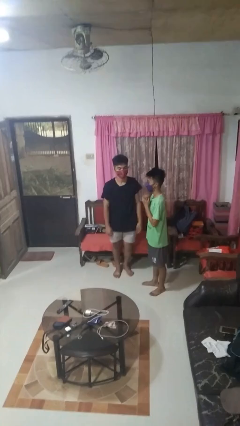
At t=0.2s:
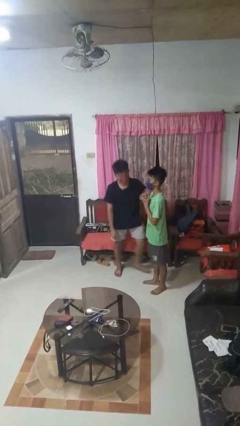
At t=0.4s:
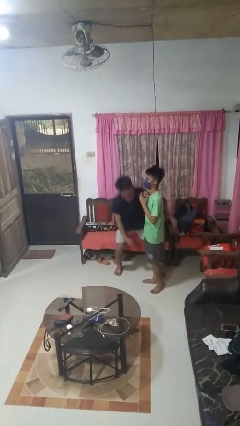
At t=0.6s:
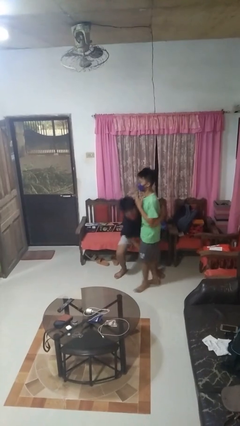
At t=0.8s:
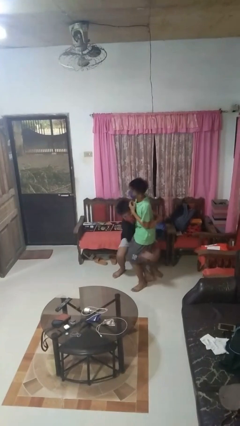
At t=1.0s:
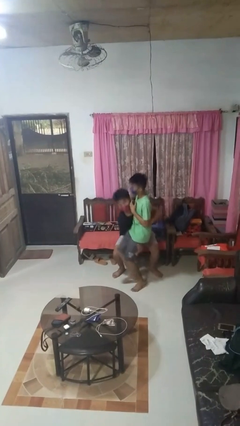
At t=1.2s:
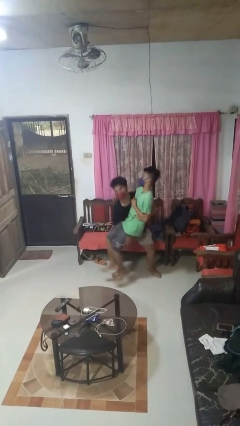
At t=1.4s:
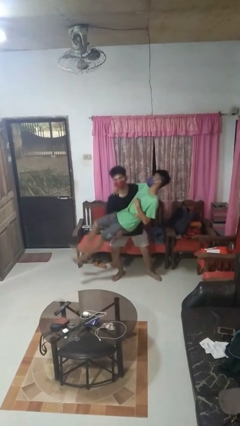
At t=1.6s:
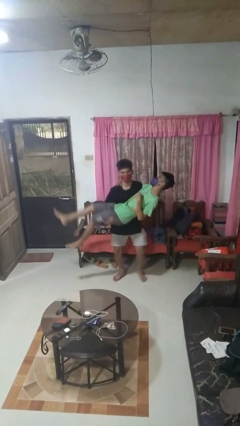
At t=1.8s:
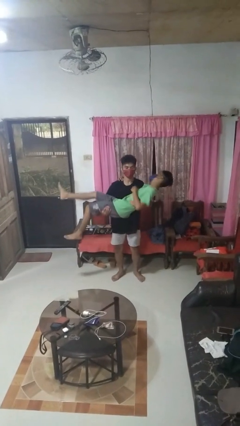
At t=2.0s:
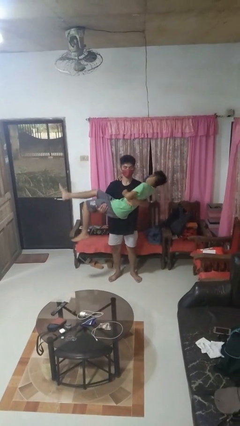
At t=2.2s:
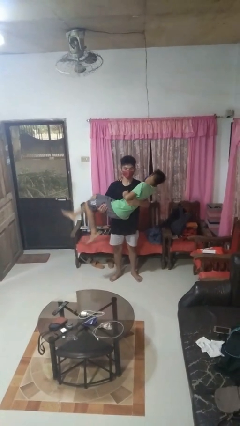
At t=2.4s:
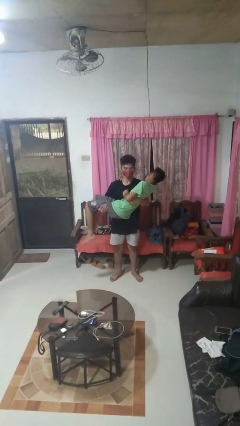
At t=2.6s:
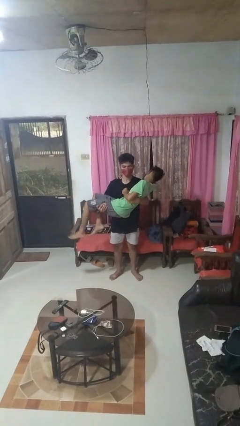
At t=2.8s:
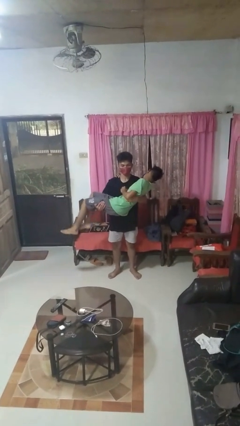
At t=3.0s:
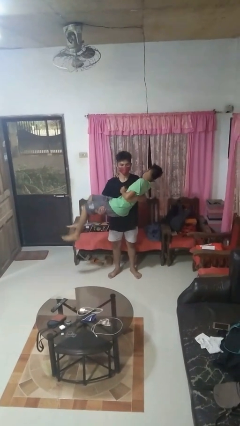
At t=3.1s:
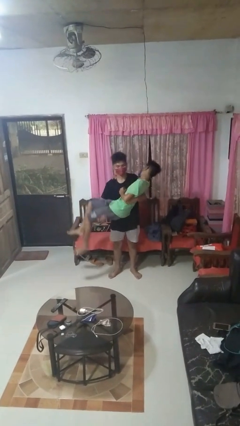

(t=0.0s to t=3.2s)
person picks up person

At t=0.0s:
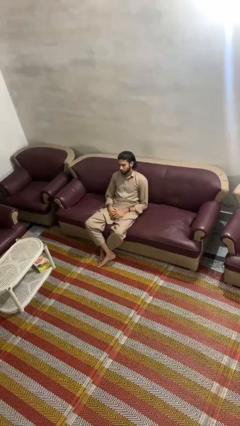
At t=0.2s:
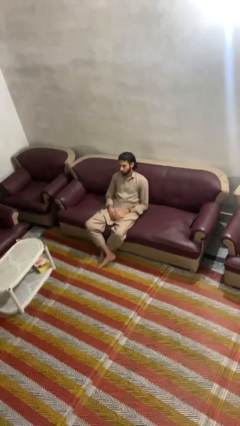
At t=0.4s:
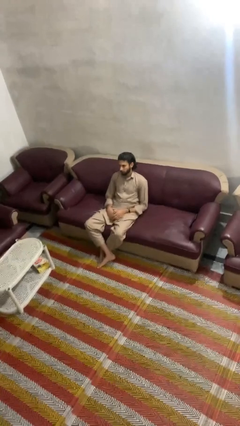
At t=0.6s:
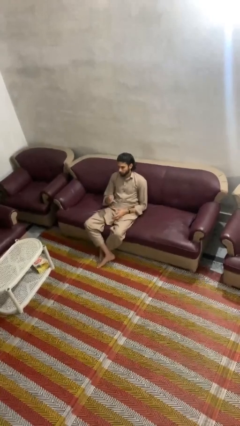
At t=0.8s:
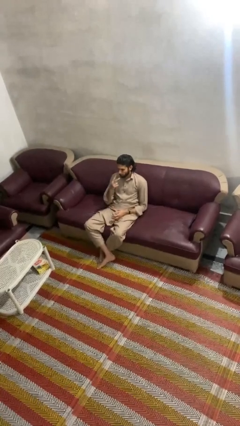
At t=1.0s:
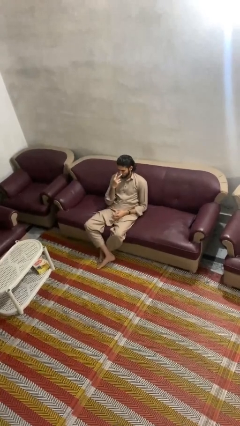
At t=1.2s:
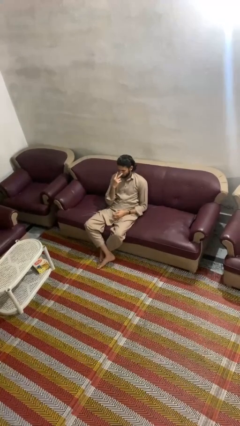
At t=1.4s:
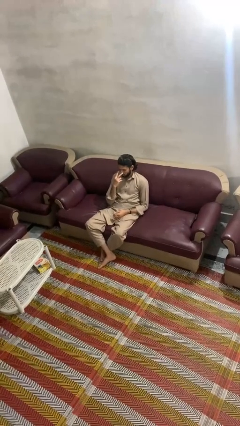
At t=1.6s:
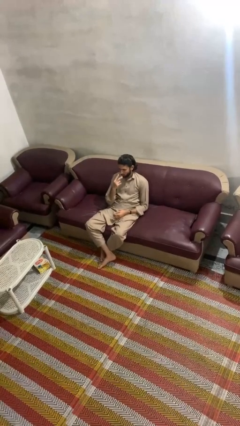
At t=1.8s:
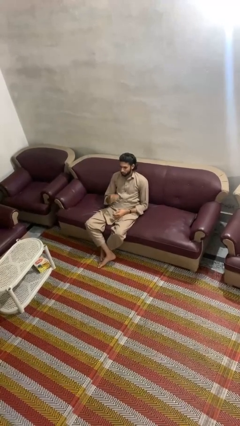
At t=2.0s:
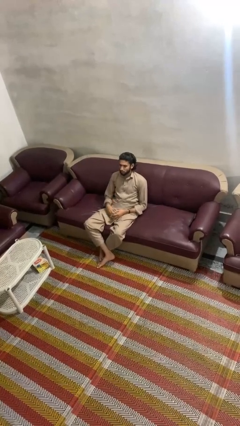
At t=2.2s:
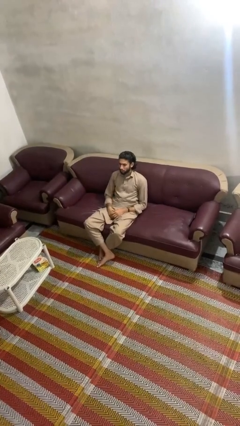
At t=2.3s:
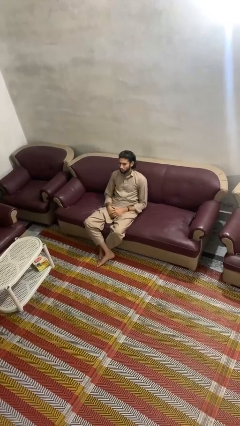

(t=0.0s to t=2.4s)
person gestures watch closely

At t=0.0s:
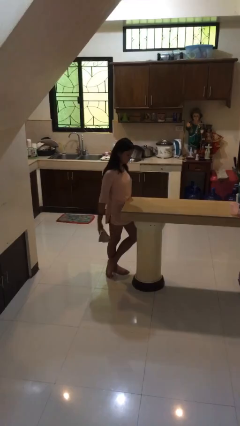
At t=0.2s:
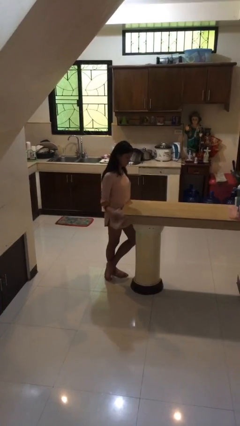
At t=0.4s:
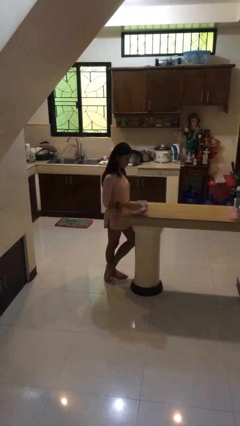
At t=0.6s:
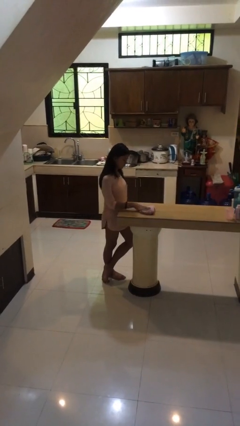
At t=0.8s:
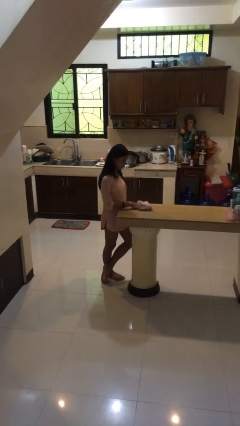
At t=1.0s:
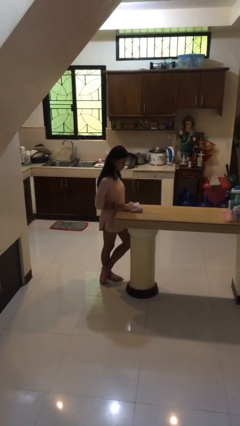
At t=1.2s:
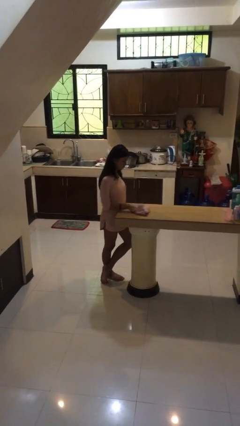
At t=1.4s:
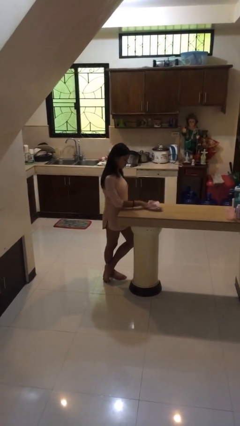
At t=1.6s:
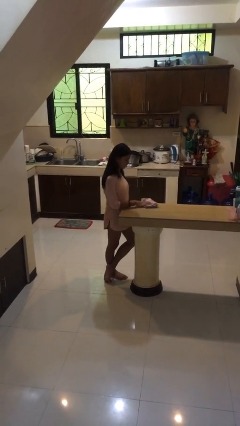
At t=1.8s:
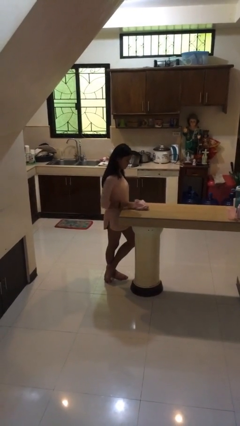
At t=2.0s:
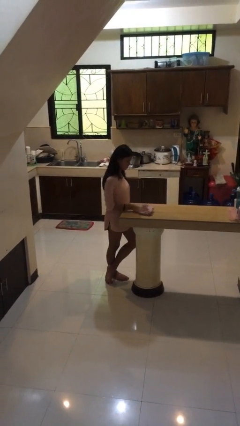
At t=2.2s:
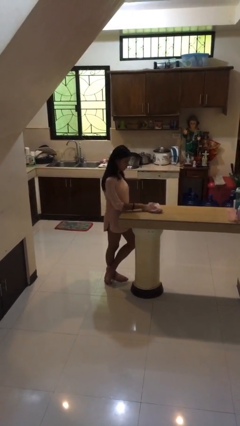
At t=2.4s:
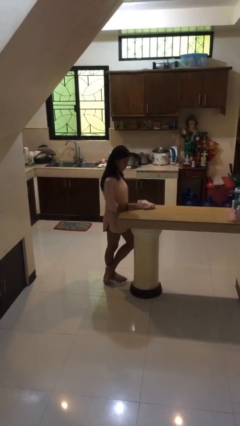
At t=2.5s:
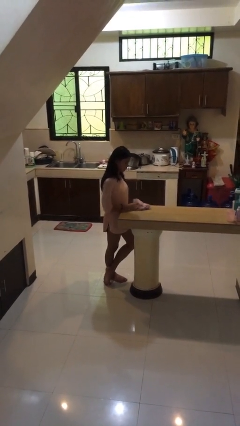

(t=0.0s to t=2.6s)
person cleans table with rag

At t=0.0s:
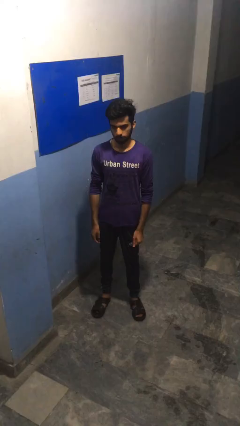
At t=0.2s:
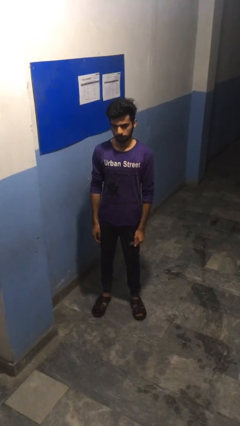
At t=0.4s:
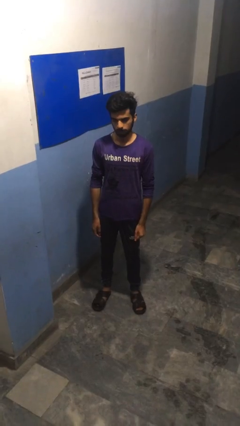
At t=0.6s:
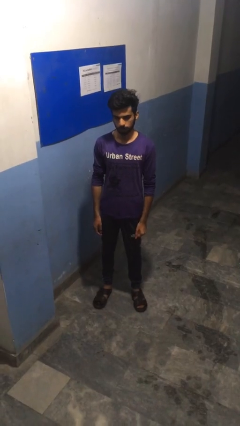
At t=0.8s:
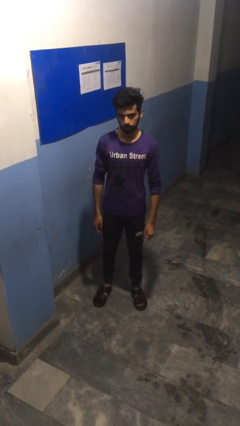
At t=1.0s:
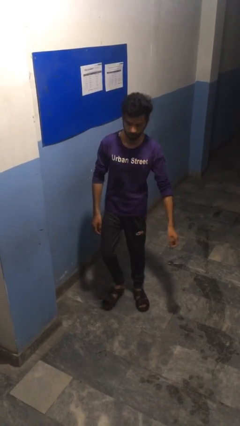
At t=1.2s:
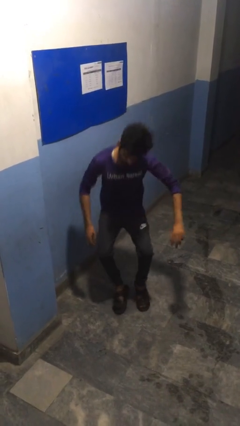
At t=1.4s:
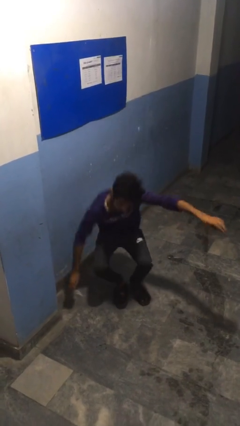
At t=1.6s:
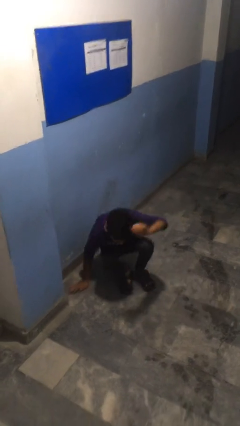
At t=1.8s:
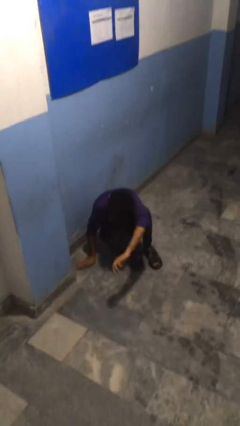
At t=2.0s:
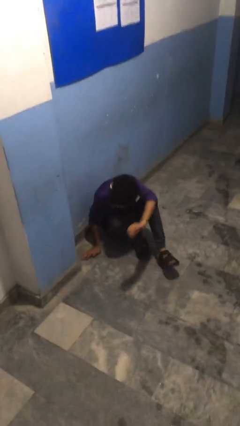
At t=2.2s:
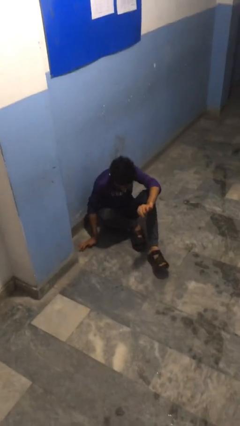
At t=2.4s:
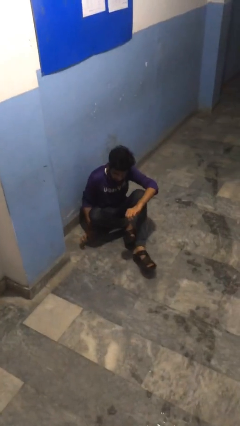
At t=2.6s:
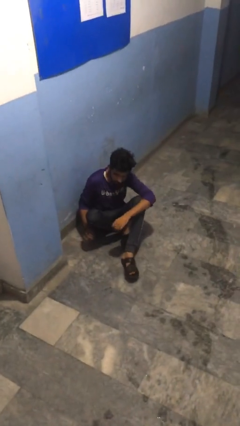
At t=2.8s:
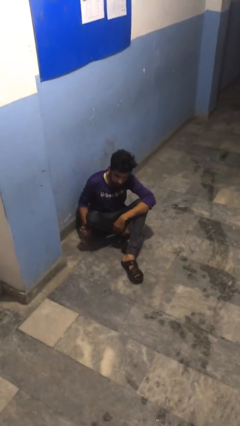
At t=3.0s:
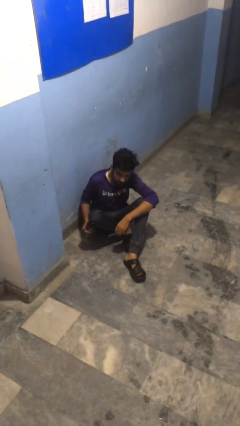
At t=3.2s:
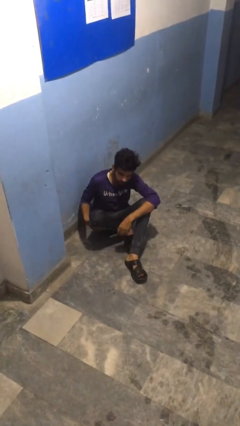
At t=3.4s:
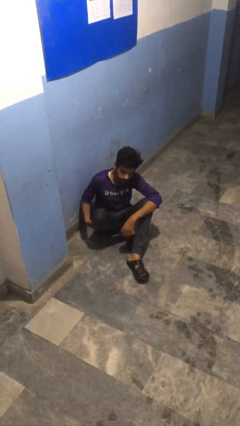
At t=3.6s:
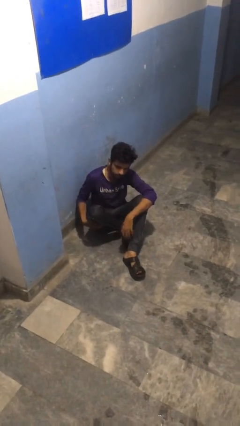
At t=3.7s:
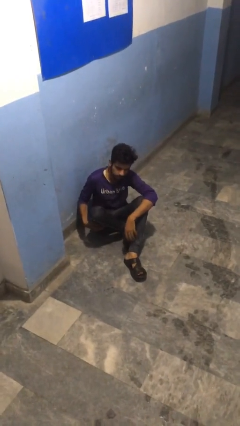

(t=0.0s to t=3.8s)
person falls while standing

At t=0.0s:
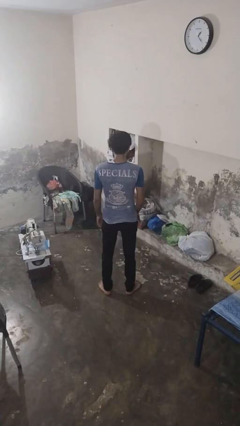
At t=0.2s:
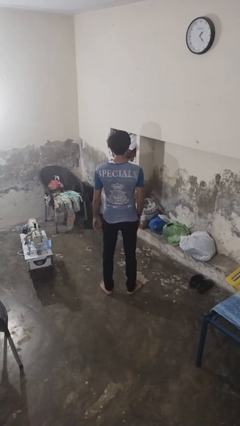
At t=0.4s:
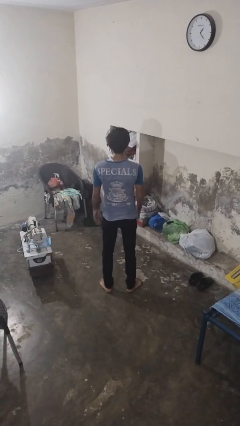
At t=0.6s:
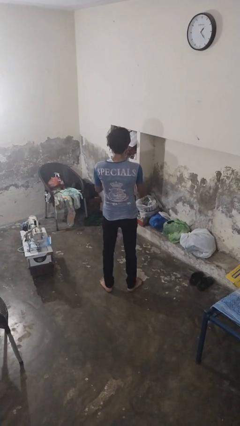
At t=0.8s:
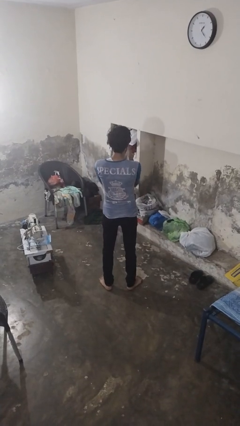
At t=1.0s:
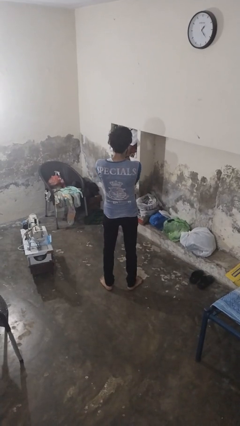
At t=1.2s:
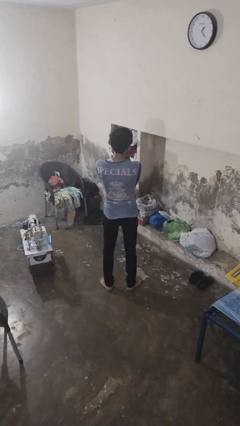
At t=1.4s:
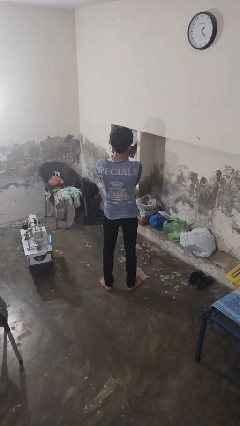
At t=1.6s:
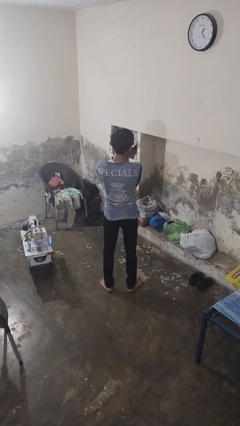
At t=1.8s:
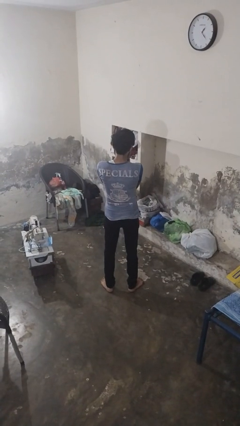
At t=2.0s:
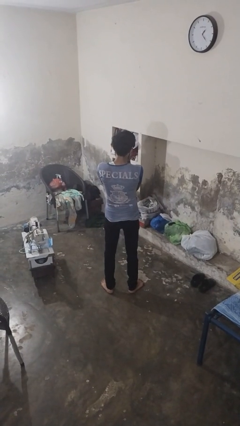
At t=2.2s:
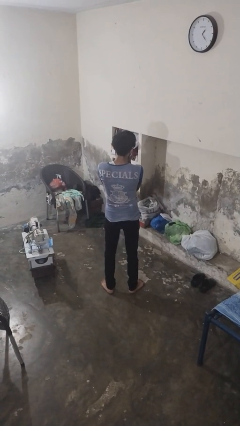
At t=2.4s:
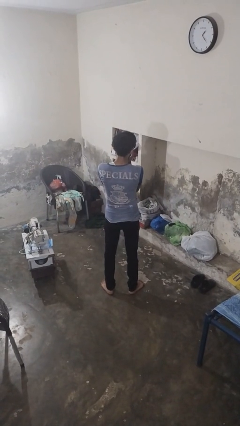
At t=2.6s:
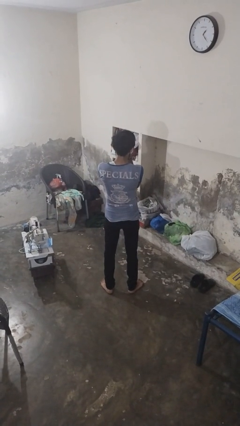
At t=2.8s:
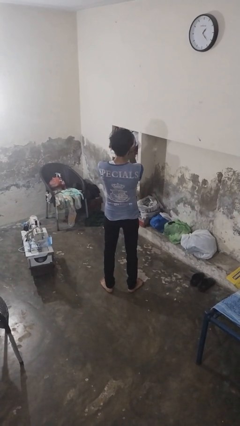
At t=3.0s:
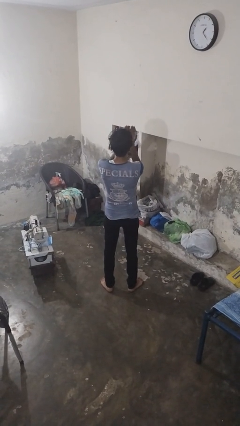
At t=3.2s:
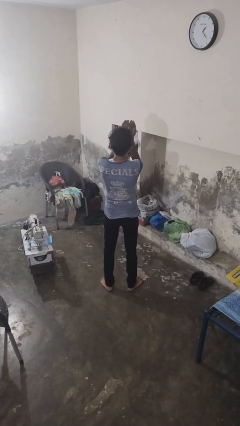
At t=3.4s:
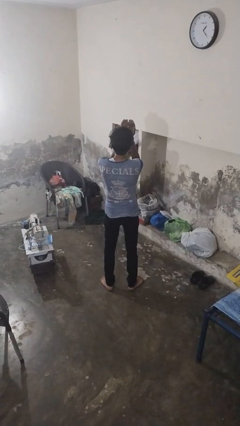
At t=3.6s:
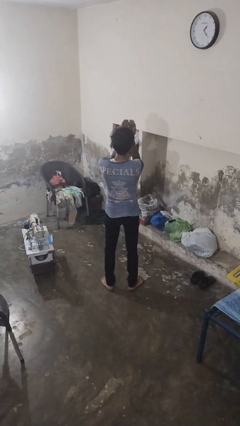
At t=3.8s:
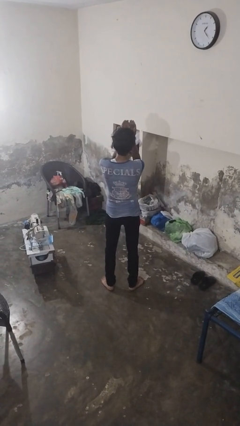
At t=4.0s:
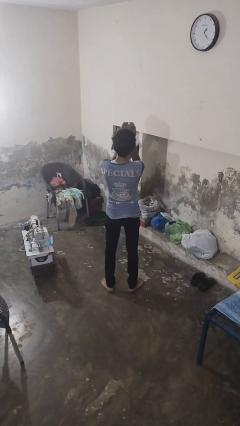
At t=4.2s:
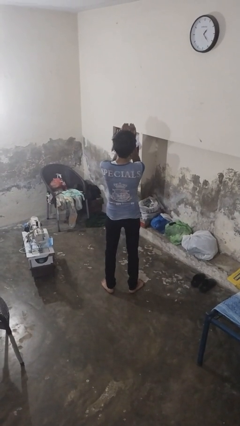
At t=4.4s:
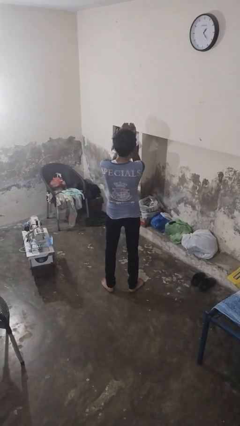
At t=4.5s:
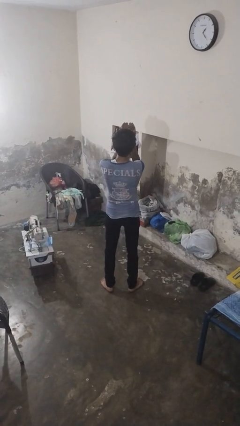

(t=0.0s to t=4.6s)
person prays

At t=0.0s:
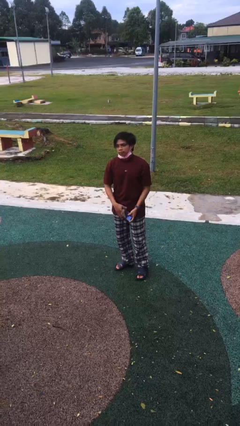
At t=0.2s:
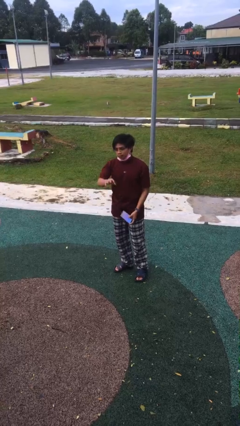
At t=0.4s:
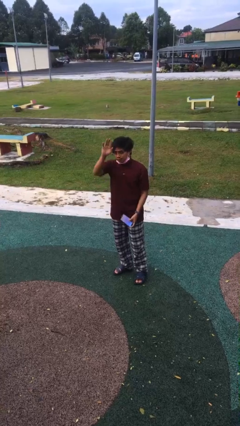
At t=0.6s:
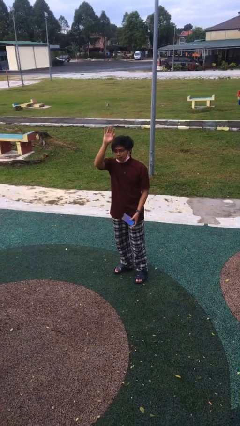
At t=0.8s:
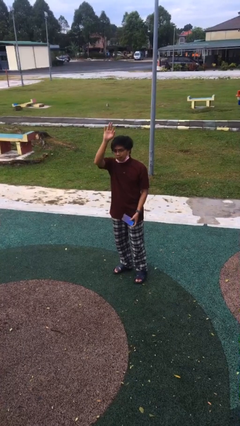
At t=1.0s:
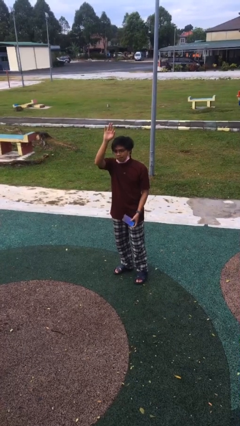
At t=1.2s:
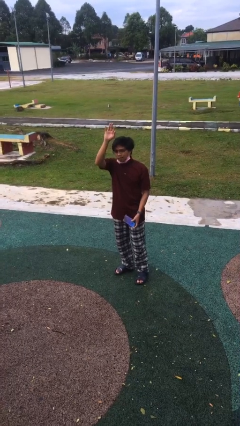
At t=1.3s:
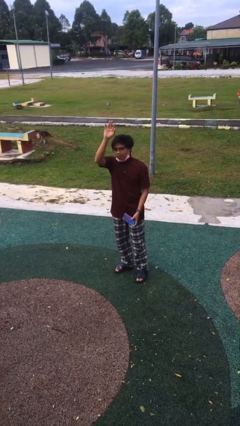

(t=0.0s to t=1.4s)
person gestures raise hand
